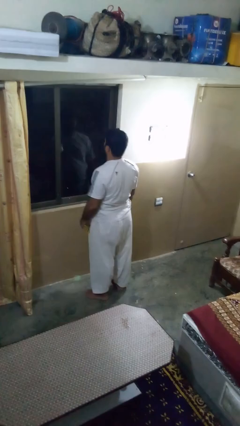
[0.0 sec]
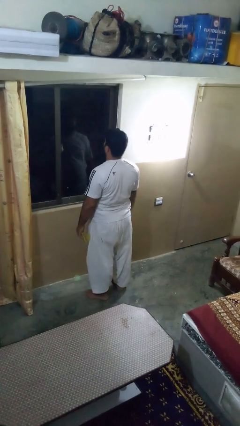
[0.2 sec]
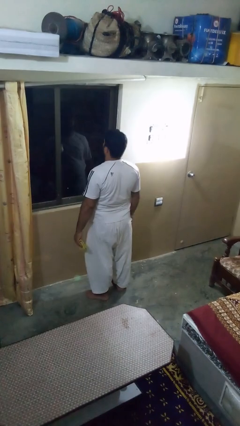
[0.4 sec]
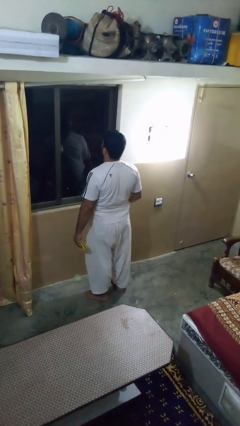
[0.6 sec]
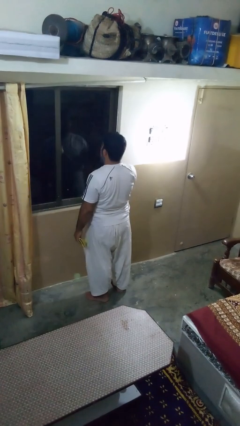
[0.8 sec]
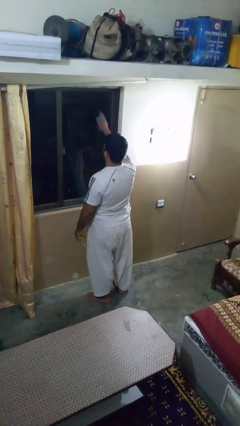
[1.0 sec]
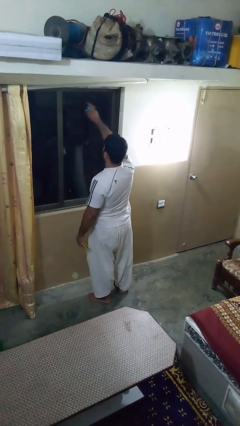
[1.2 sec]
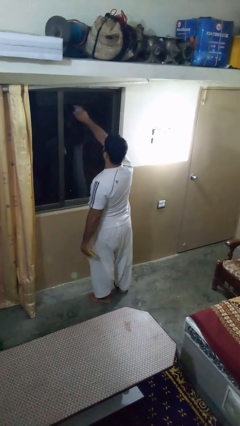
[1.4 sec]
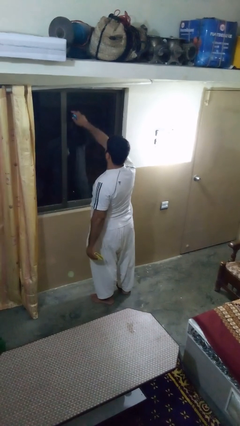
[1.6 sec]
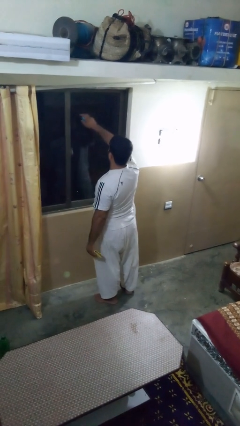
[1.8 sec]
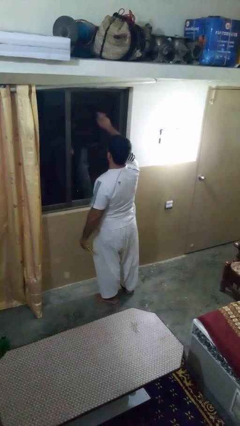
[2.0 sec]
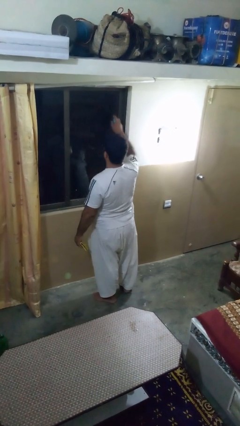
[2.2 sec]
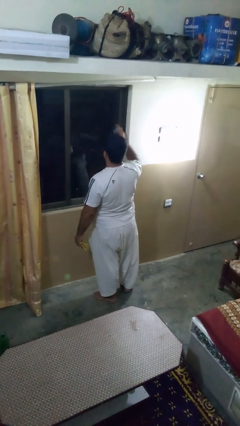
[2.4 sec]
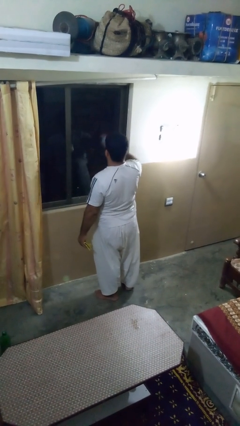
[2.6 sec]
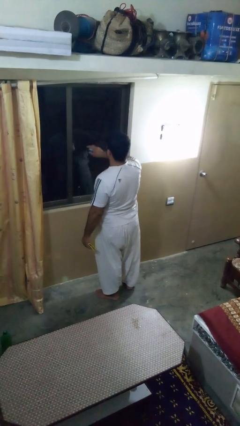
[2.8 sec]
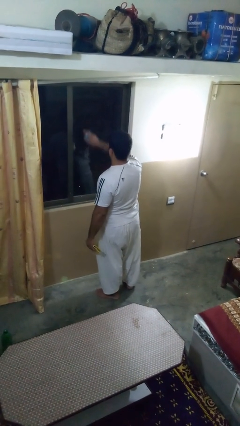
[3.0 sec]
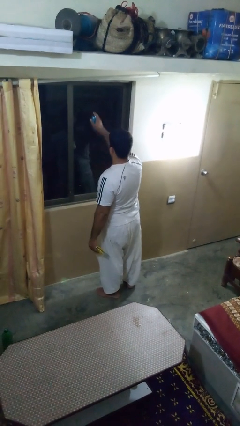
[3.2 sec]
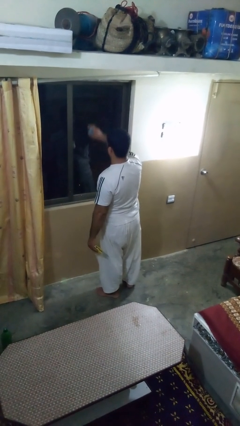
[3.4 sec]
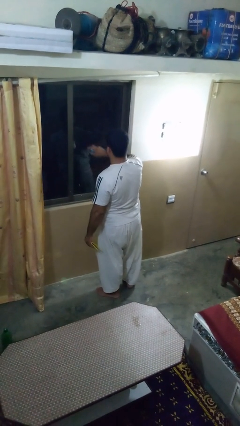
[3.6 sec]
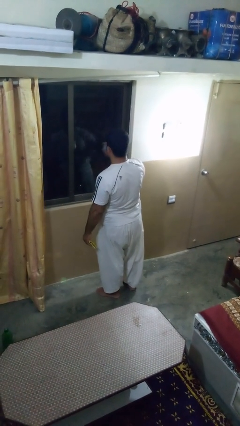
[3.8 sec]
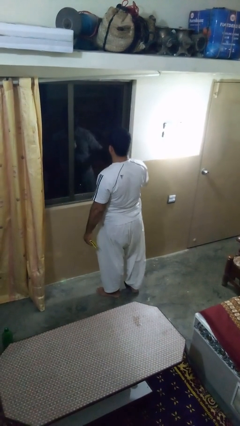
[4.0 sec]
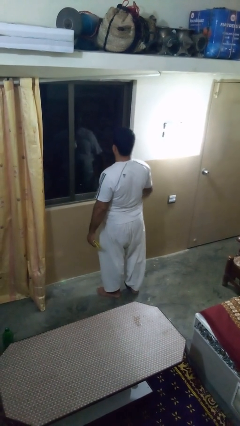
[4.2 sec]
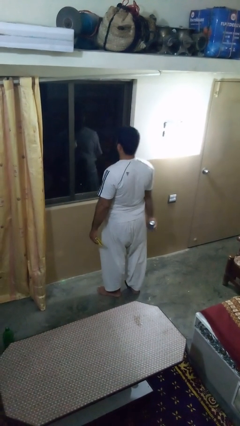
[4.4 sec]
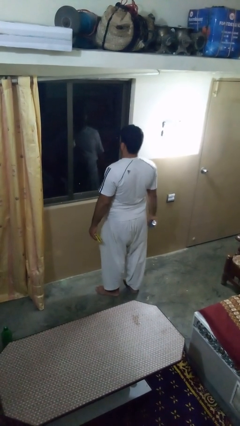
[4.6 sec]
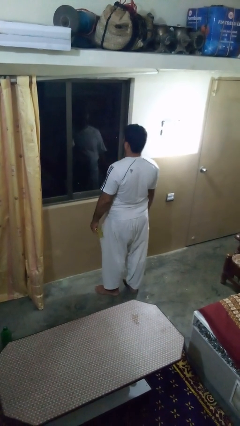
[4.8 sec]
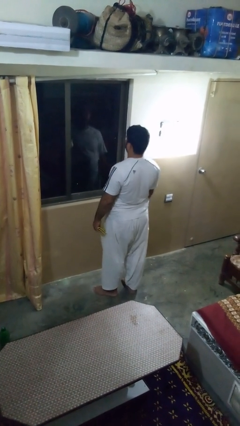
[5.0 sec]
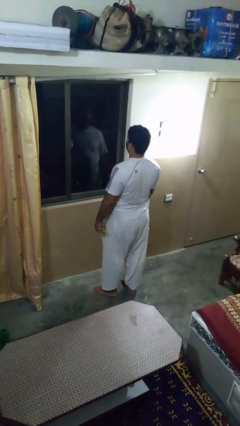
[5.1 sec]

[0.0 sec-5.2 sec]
person sprays from bottle

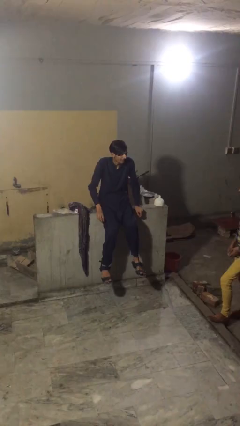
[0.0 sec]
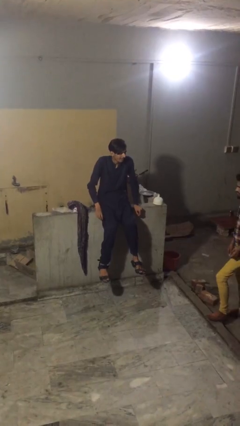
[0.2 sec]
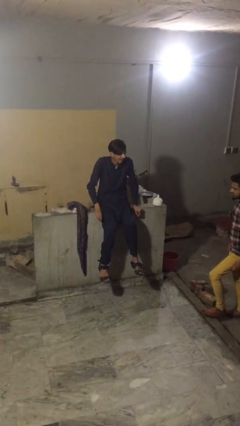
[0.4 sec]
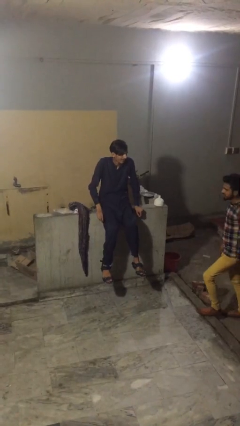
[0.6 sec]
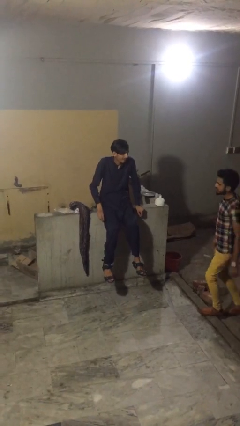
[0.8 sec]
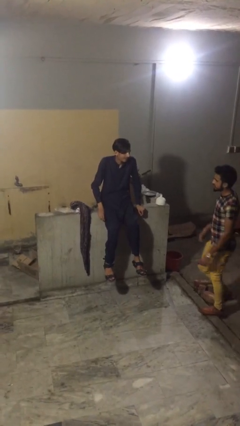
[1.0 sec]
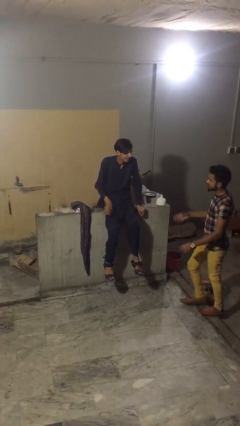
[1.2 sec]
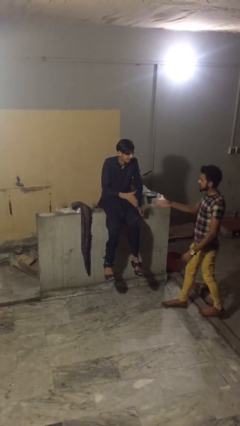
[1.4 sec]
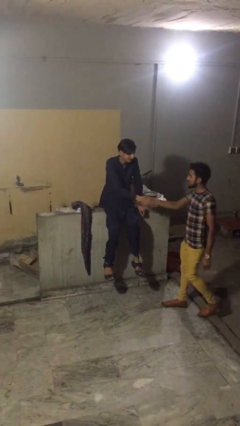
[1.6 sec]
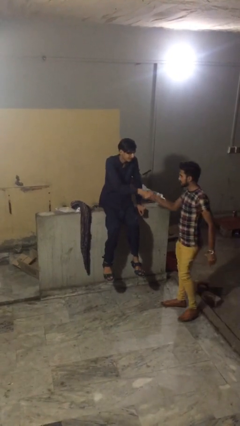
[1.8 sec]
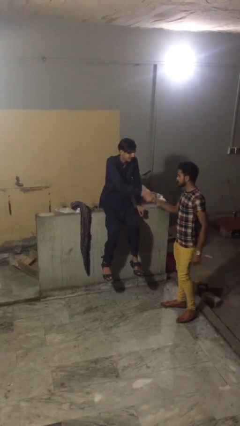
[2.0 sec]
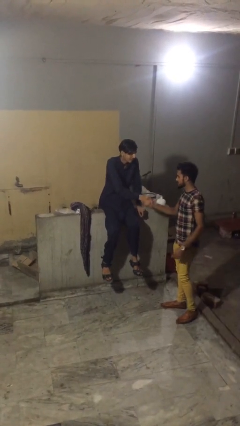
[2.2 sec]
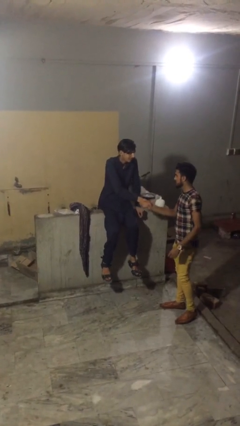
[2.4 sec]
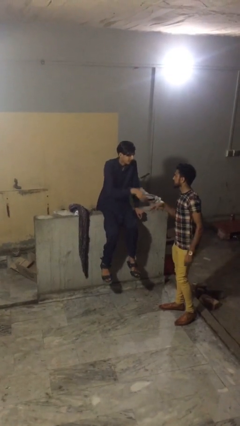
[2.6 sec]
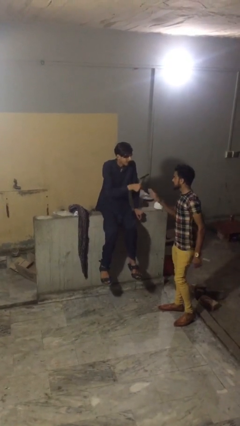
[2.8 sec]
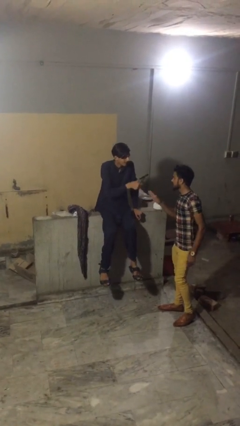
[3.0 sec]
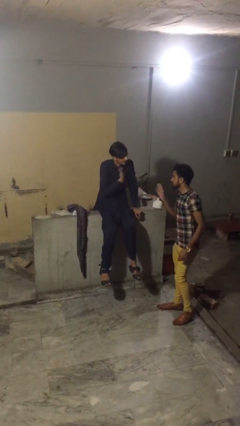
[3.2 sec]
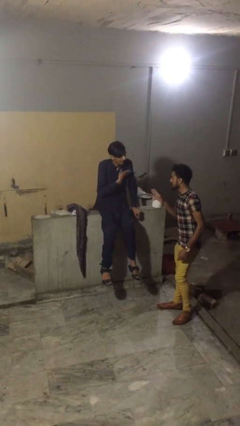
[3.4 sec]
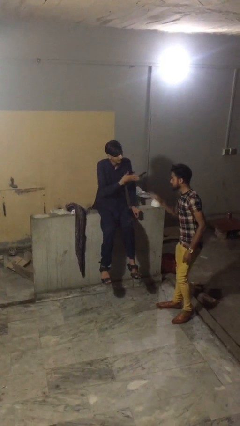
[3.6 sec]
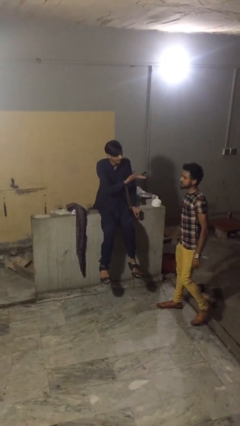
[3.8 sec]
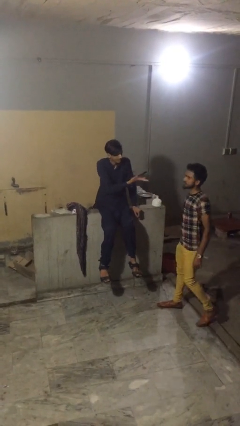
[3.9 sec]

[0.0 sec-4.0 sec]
person shakes hand

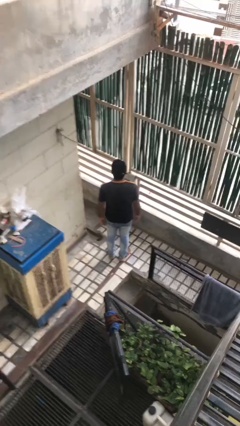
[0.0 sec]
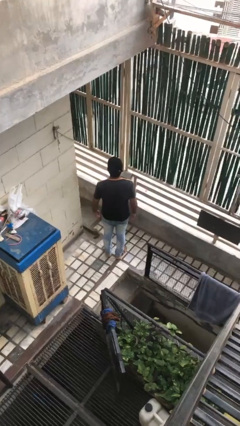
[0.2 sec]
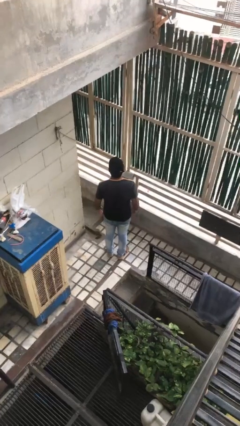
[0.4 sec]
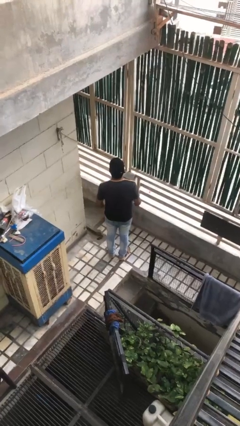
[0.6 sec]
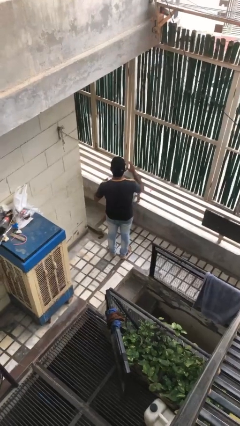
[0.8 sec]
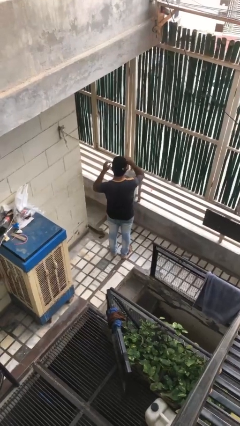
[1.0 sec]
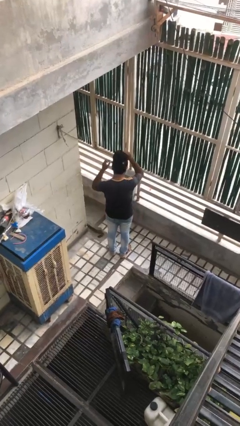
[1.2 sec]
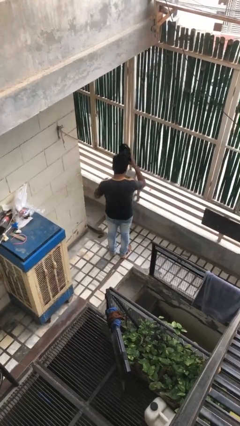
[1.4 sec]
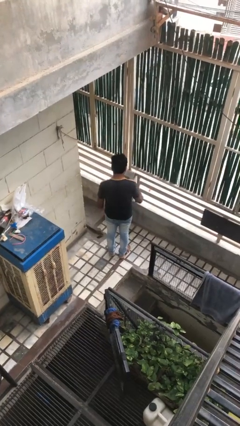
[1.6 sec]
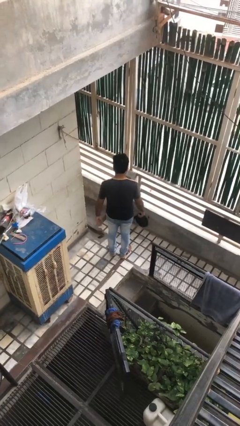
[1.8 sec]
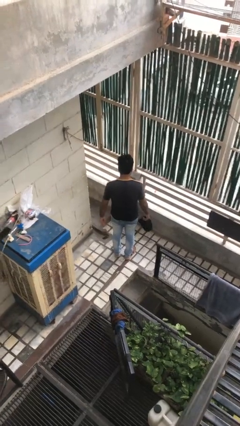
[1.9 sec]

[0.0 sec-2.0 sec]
person takes off hat

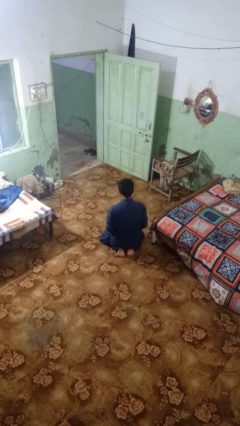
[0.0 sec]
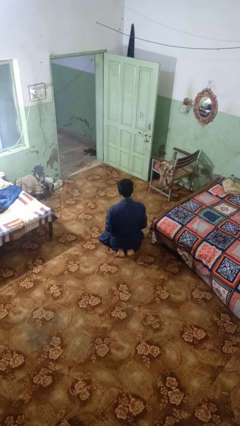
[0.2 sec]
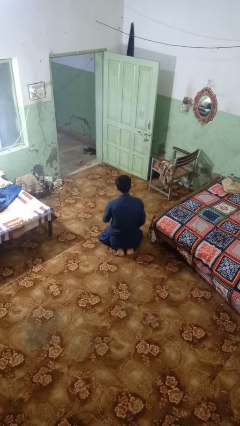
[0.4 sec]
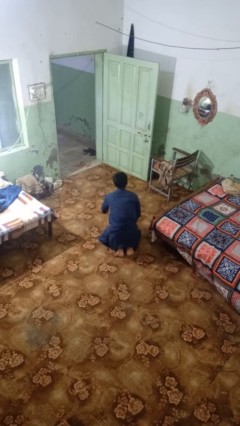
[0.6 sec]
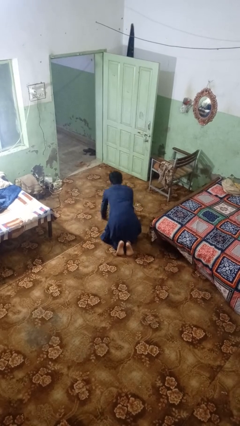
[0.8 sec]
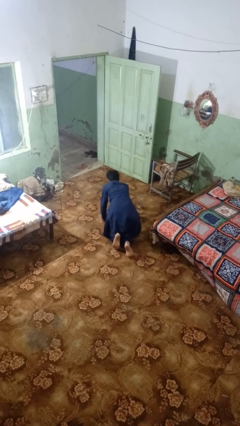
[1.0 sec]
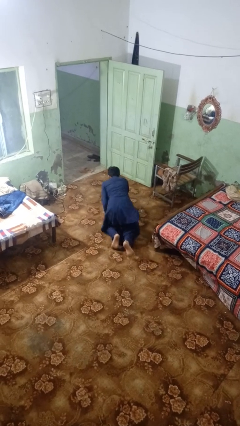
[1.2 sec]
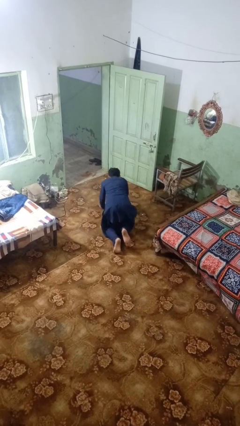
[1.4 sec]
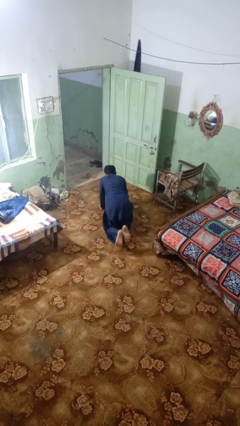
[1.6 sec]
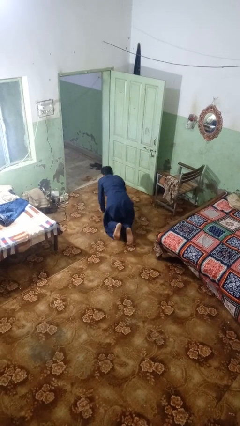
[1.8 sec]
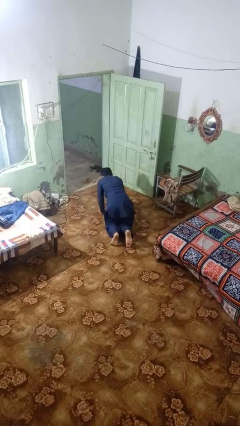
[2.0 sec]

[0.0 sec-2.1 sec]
person crawls

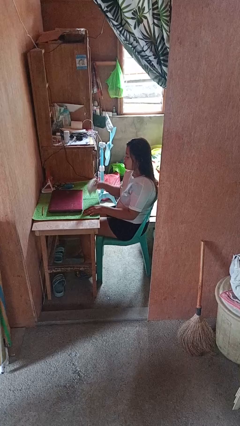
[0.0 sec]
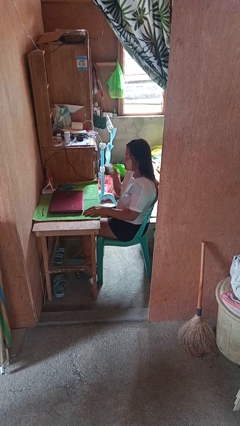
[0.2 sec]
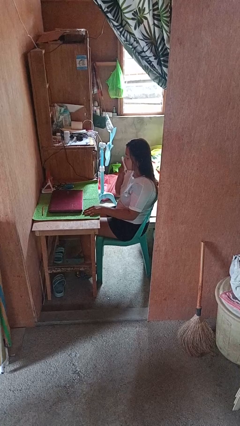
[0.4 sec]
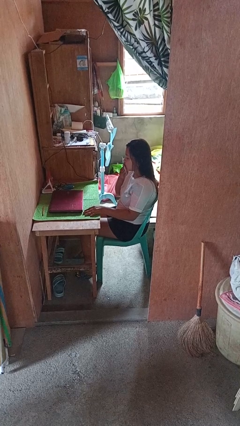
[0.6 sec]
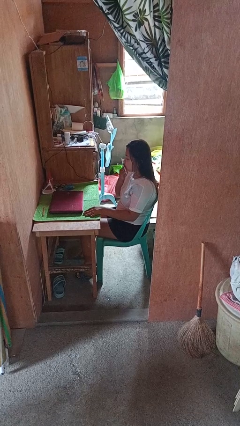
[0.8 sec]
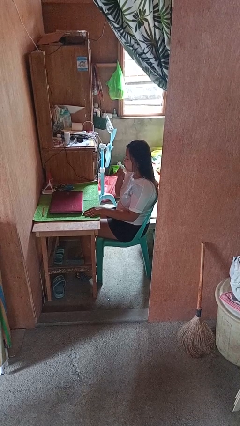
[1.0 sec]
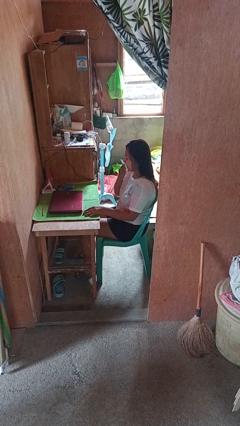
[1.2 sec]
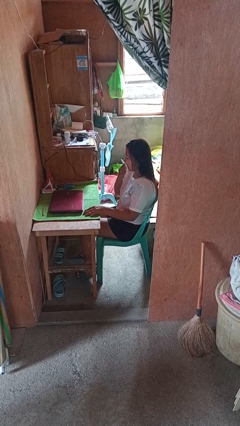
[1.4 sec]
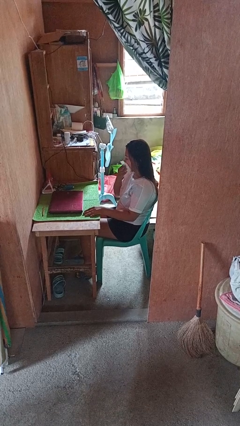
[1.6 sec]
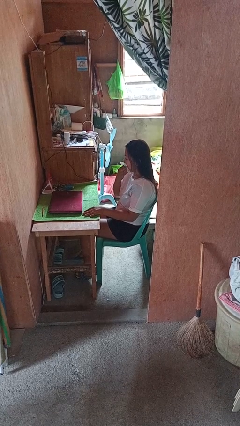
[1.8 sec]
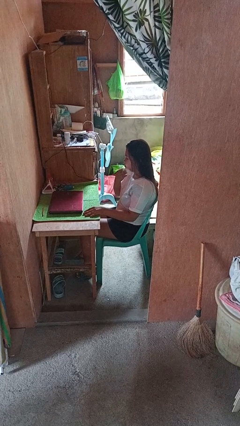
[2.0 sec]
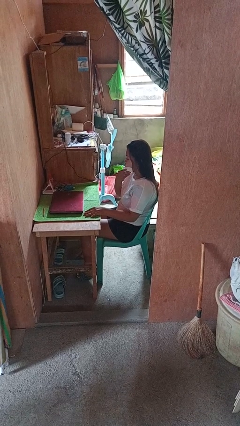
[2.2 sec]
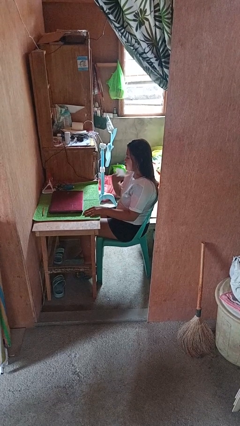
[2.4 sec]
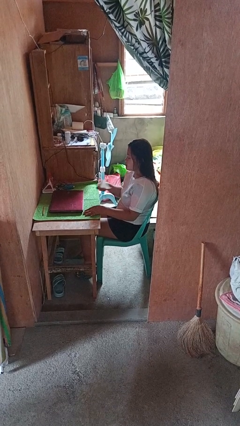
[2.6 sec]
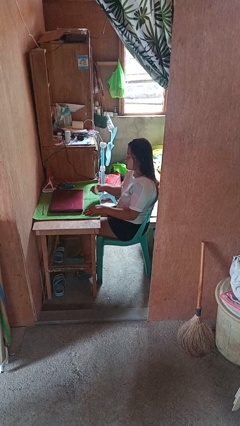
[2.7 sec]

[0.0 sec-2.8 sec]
person wipes mouth with napkin

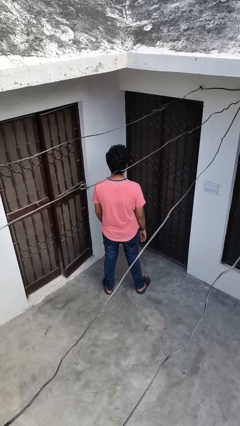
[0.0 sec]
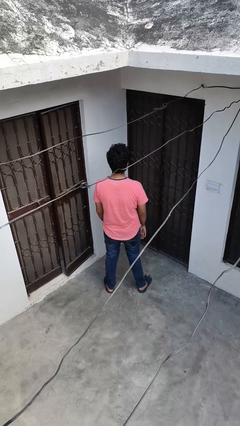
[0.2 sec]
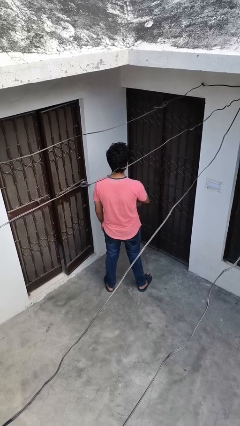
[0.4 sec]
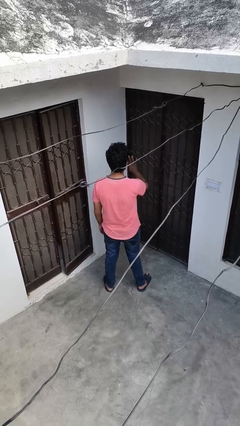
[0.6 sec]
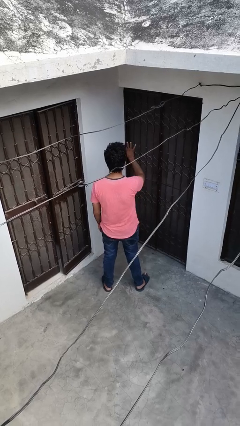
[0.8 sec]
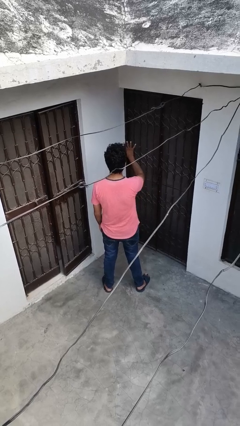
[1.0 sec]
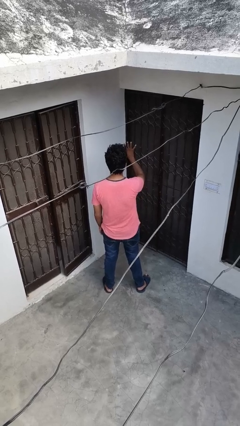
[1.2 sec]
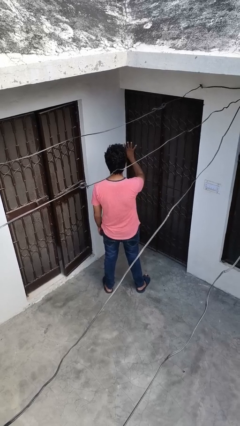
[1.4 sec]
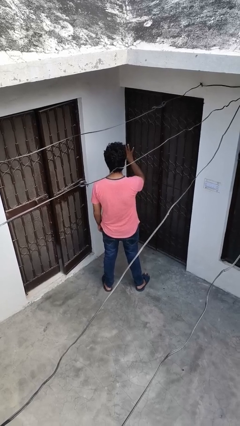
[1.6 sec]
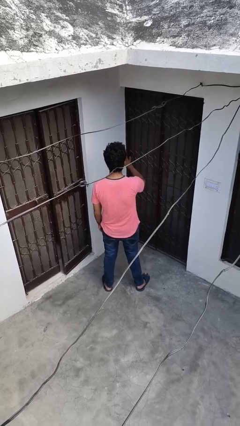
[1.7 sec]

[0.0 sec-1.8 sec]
person gestures number four
